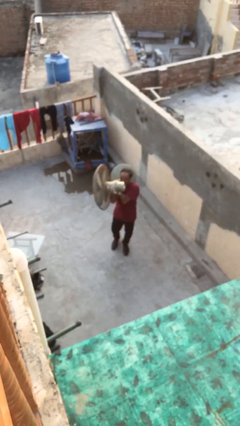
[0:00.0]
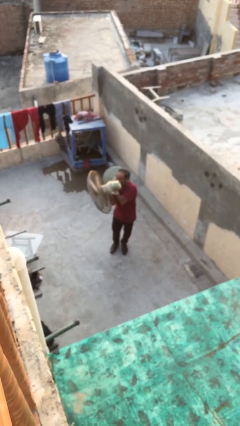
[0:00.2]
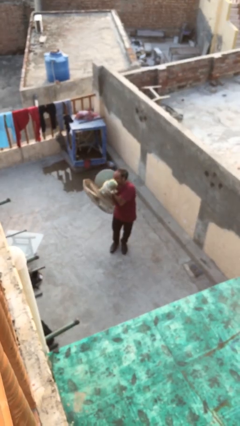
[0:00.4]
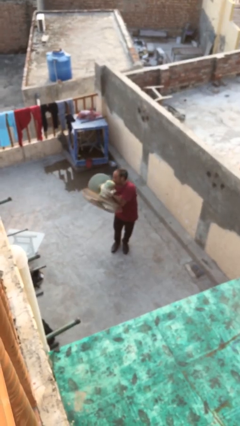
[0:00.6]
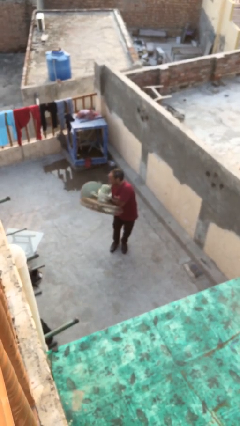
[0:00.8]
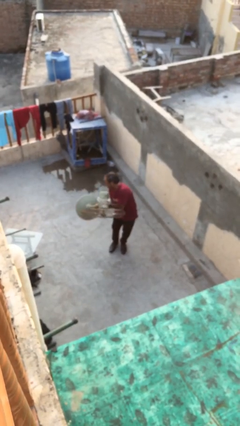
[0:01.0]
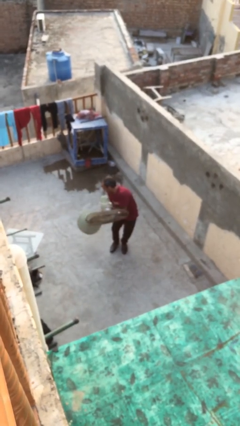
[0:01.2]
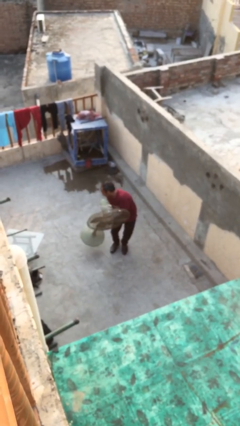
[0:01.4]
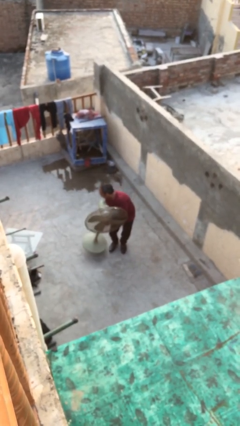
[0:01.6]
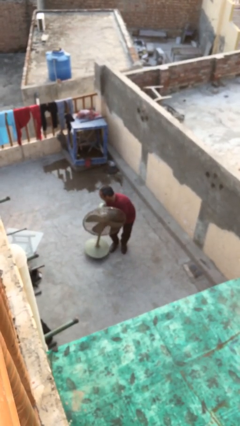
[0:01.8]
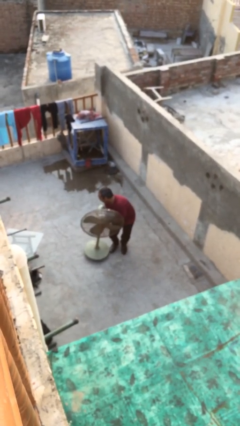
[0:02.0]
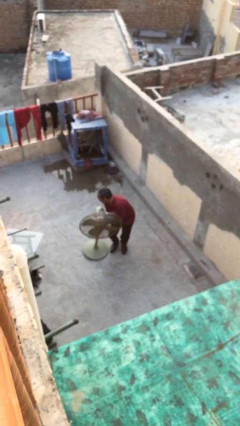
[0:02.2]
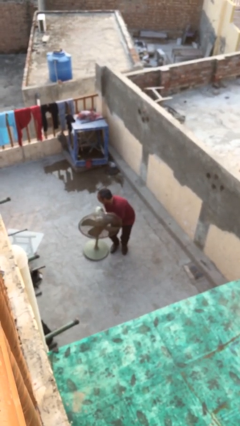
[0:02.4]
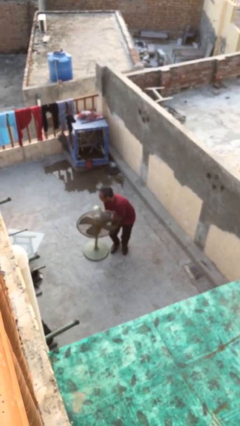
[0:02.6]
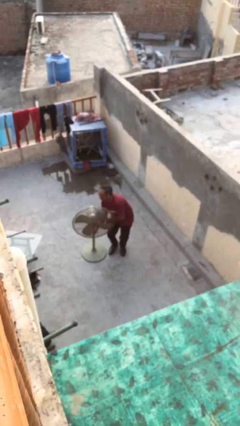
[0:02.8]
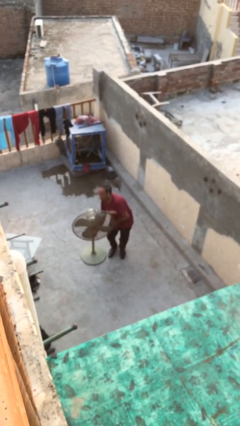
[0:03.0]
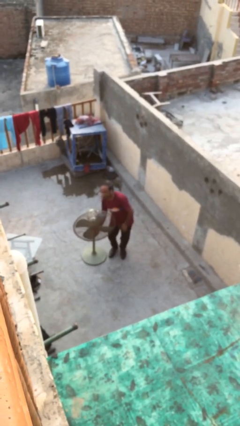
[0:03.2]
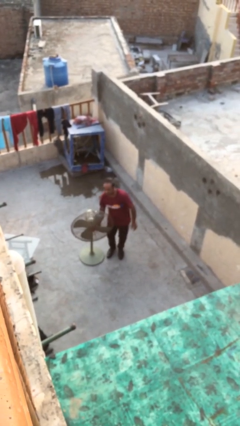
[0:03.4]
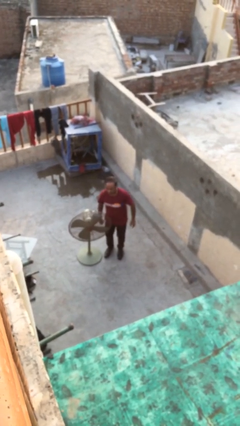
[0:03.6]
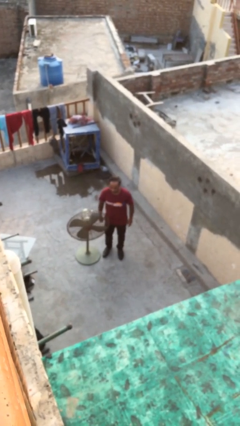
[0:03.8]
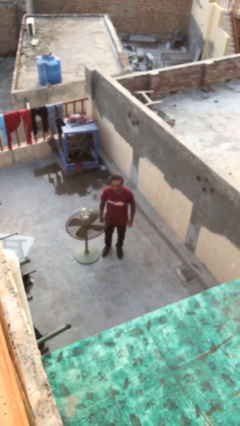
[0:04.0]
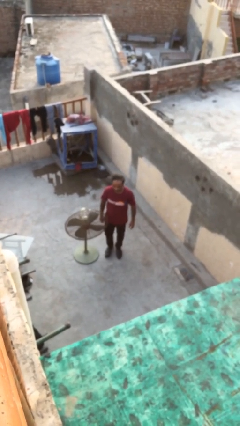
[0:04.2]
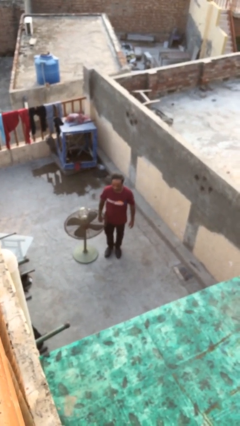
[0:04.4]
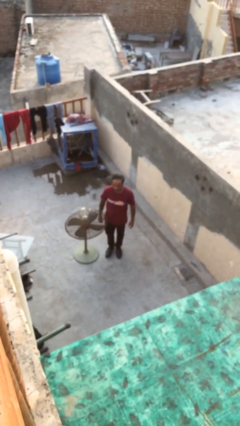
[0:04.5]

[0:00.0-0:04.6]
person puts down object on floor

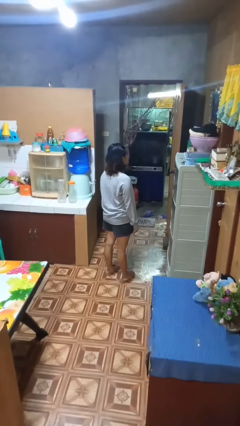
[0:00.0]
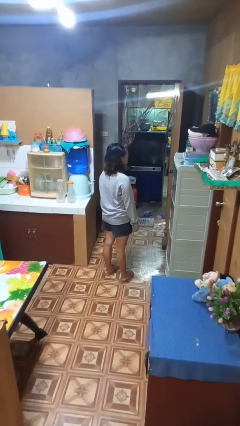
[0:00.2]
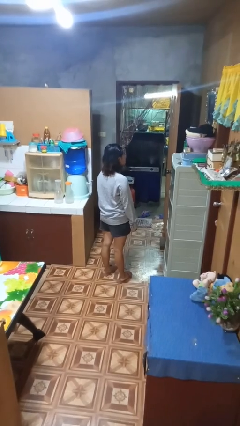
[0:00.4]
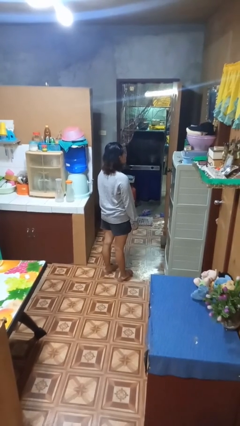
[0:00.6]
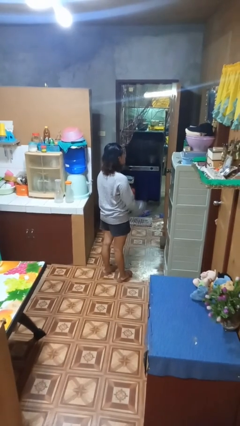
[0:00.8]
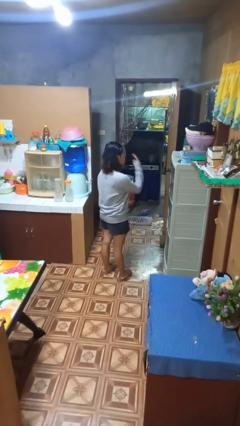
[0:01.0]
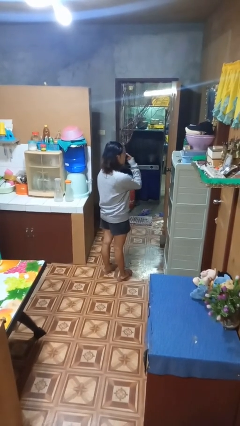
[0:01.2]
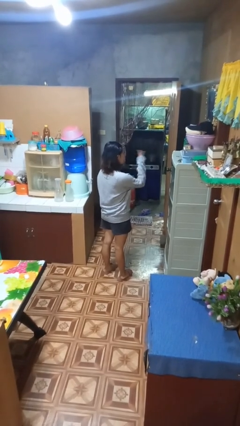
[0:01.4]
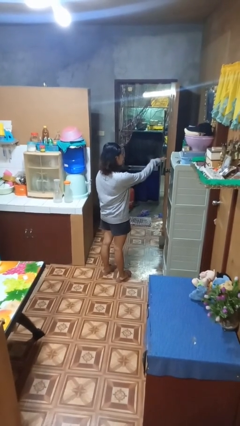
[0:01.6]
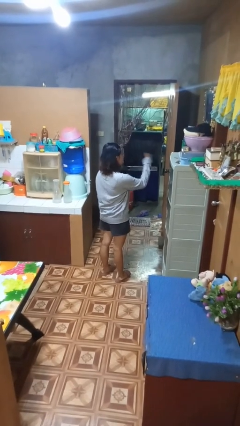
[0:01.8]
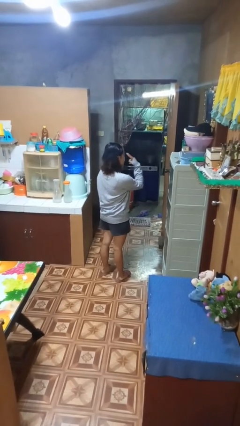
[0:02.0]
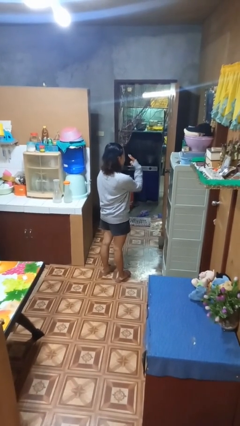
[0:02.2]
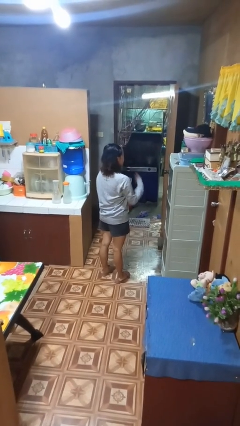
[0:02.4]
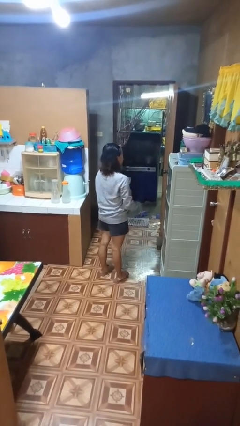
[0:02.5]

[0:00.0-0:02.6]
person gestures watch closely

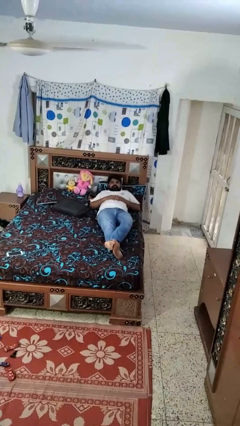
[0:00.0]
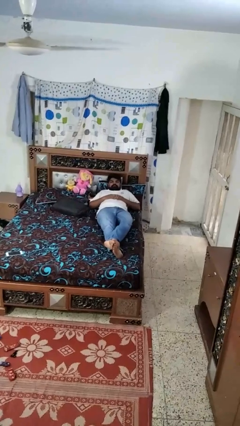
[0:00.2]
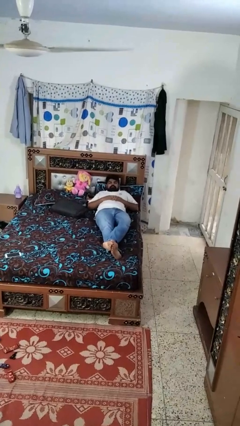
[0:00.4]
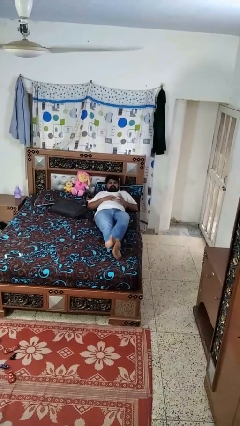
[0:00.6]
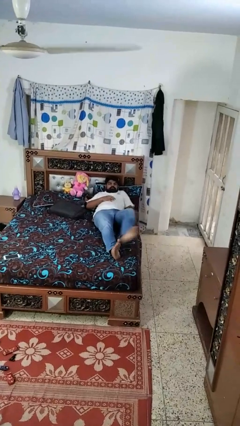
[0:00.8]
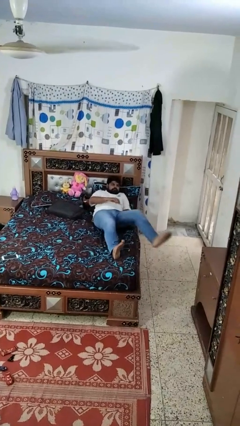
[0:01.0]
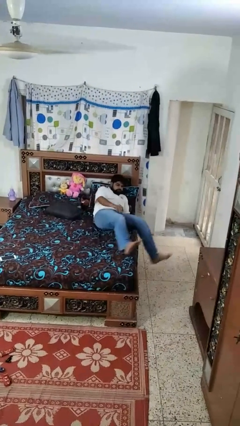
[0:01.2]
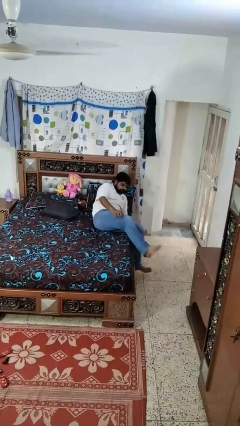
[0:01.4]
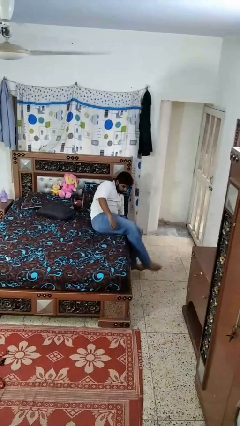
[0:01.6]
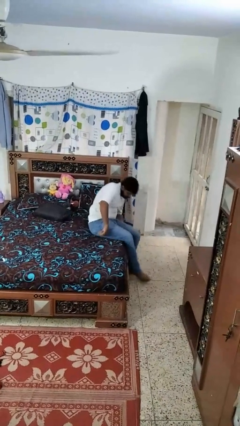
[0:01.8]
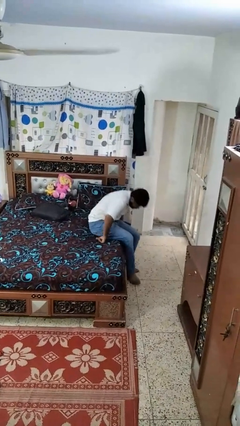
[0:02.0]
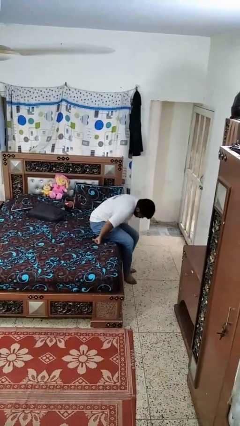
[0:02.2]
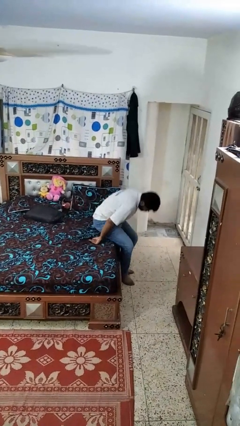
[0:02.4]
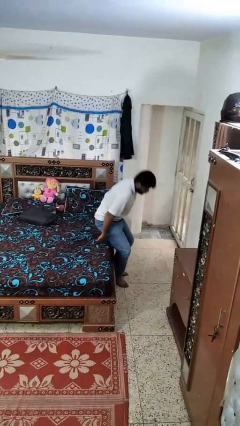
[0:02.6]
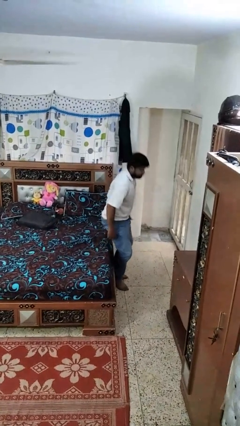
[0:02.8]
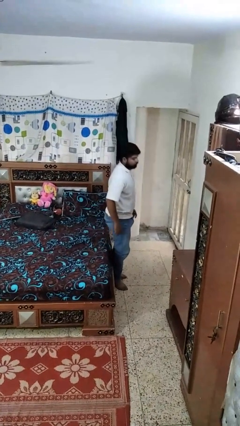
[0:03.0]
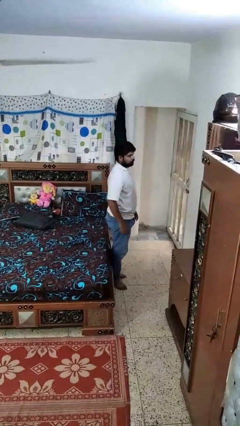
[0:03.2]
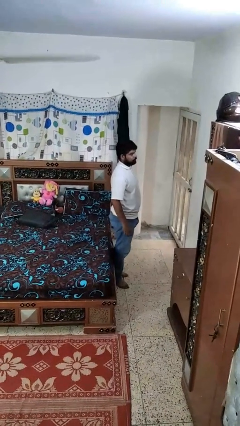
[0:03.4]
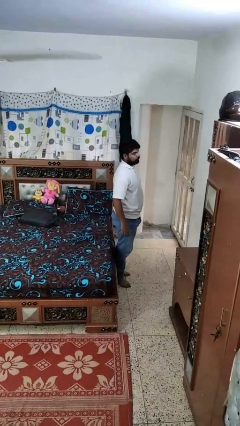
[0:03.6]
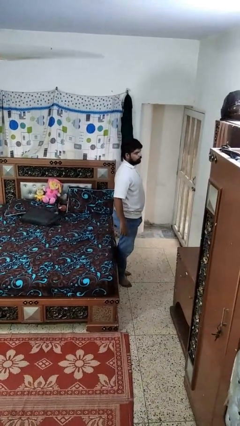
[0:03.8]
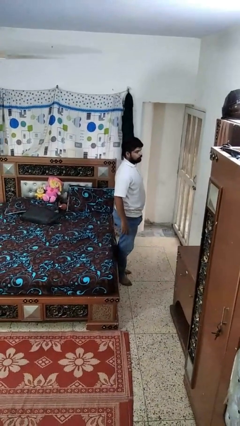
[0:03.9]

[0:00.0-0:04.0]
person stands up

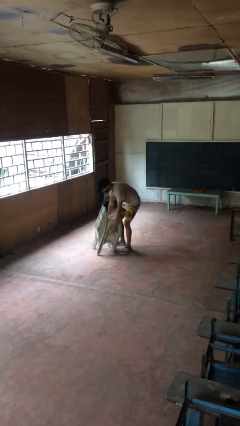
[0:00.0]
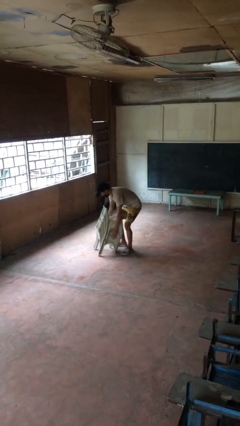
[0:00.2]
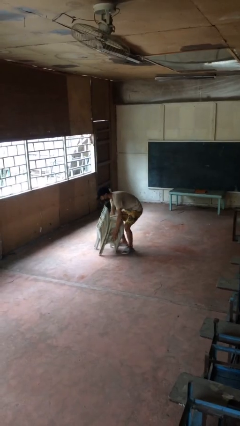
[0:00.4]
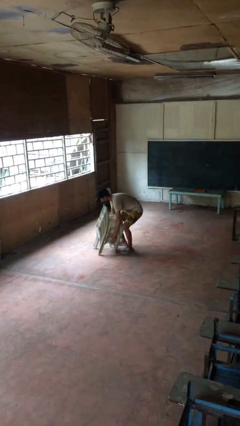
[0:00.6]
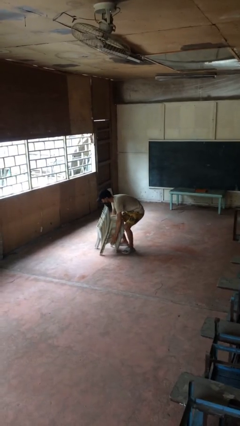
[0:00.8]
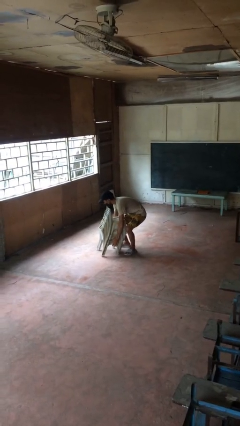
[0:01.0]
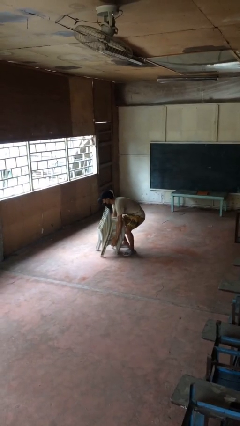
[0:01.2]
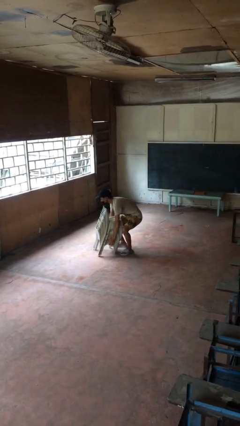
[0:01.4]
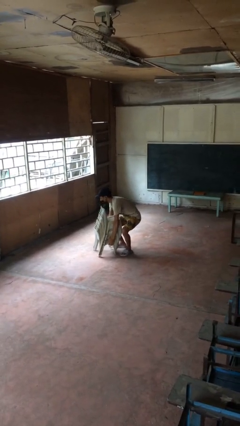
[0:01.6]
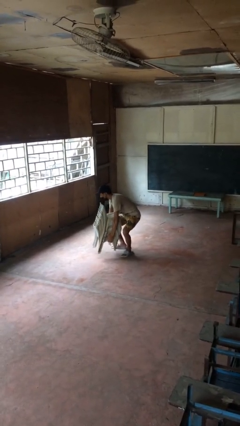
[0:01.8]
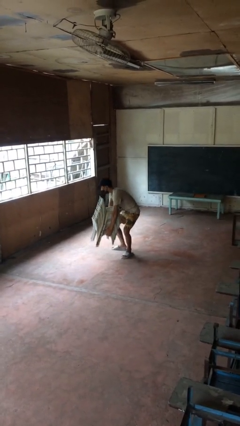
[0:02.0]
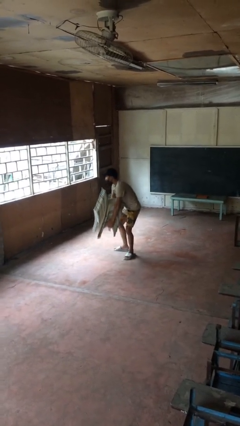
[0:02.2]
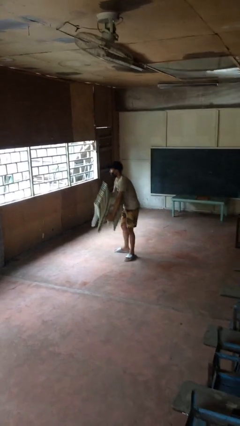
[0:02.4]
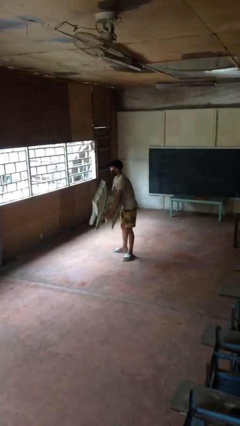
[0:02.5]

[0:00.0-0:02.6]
person picks up object from floor

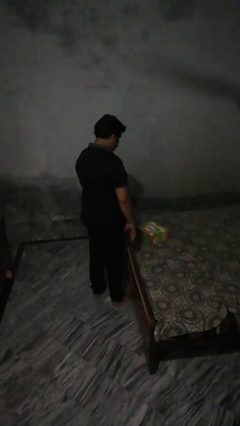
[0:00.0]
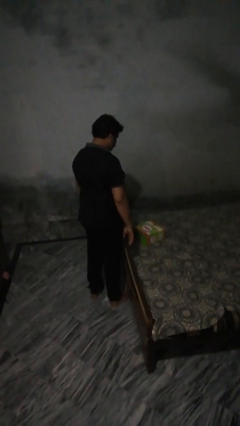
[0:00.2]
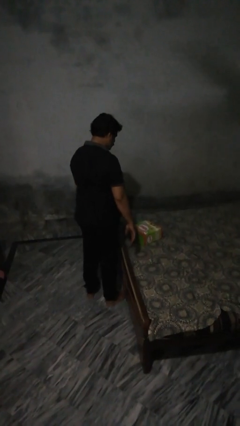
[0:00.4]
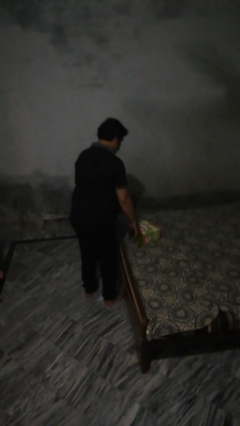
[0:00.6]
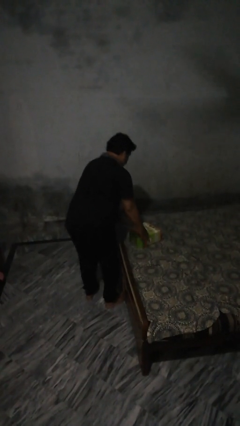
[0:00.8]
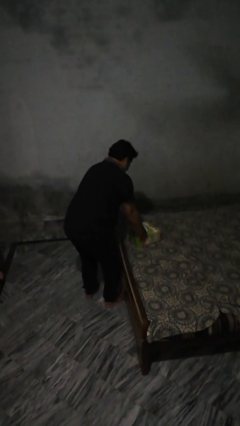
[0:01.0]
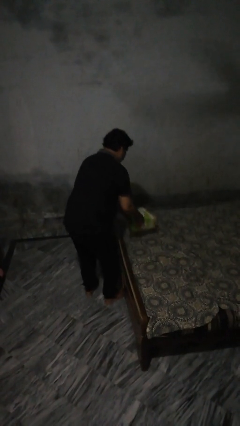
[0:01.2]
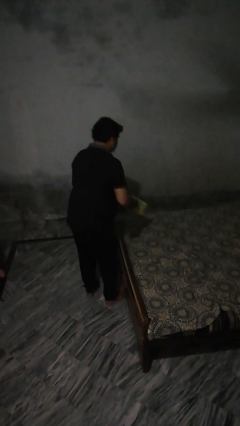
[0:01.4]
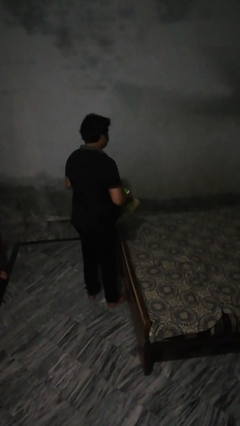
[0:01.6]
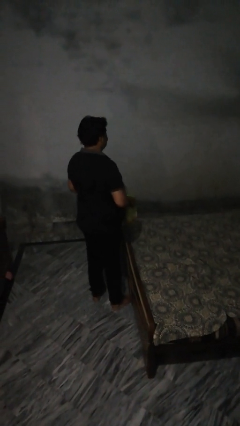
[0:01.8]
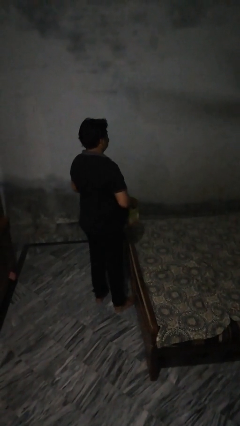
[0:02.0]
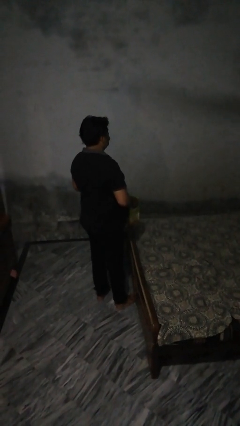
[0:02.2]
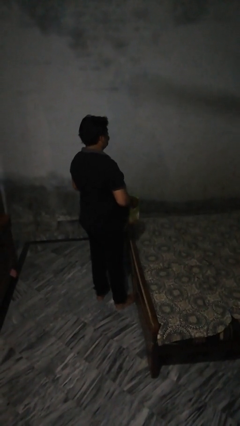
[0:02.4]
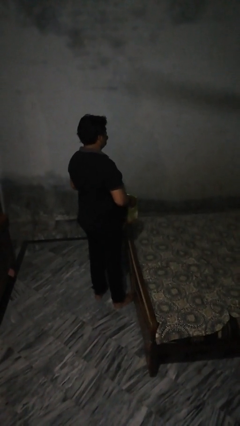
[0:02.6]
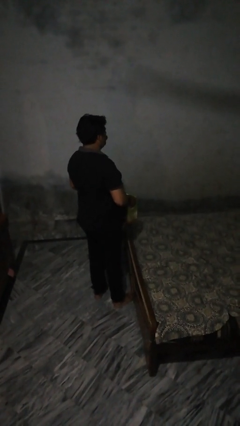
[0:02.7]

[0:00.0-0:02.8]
person picks up object from bed

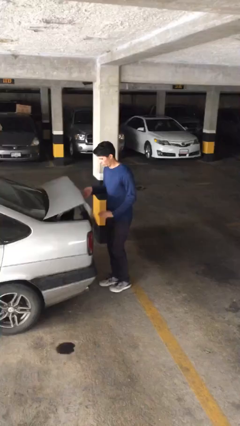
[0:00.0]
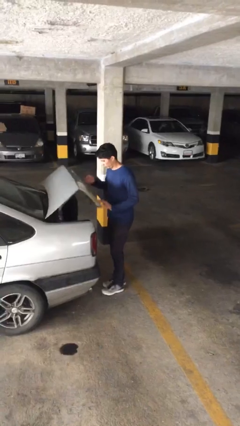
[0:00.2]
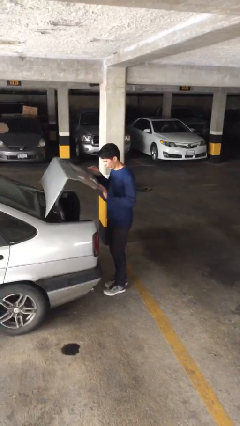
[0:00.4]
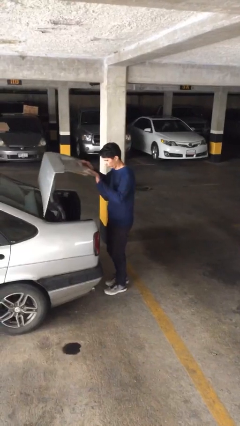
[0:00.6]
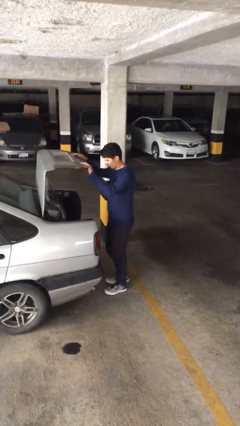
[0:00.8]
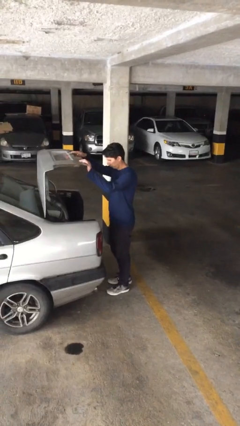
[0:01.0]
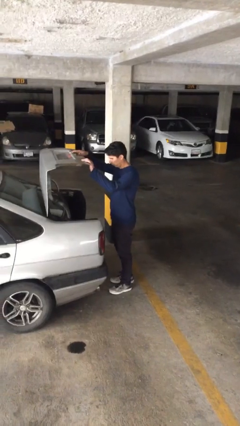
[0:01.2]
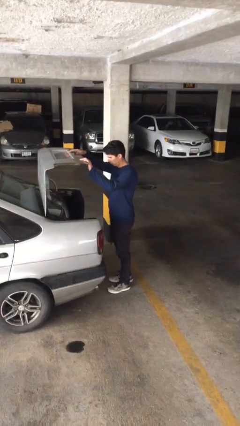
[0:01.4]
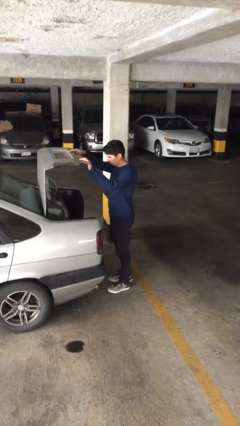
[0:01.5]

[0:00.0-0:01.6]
person opens car trunk
